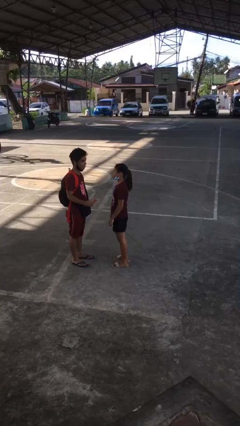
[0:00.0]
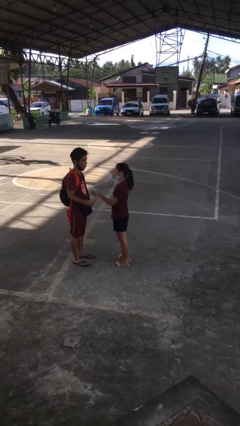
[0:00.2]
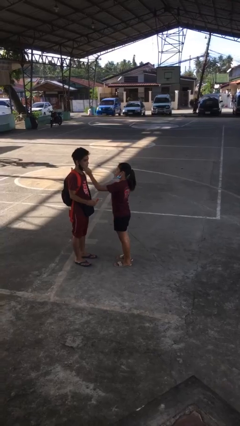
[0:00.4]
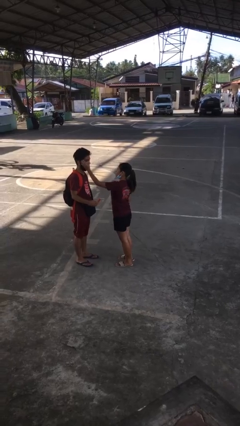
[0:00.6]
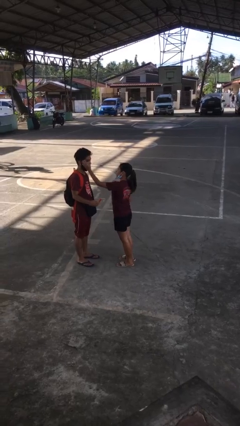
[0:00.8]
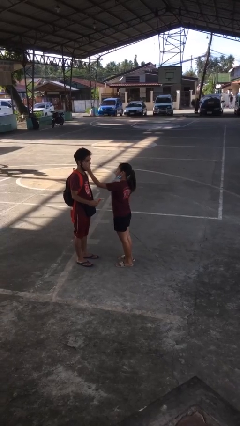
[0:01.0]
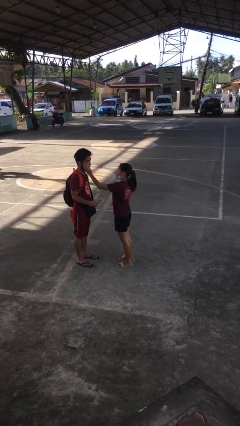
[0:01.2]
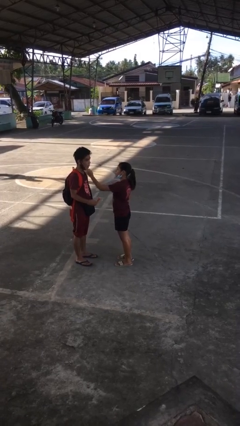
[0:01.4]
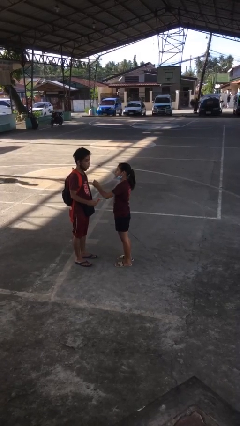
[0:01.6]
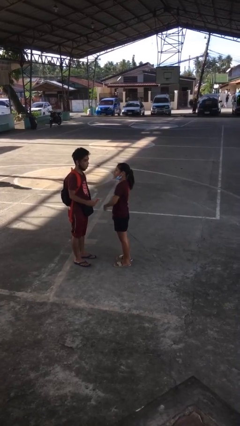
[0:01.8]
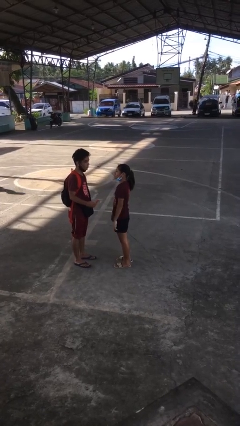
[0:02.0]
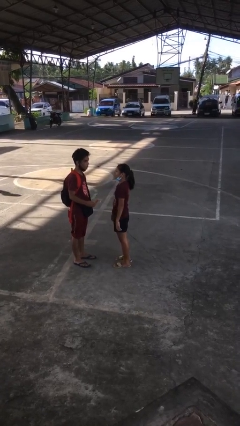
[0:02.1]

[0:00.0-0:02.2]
person touches face of person

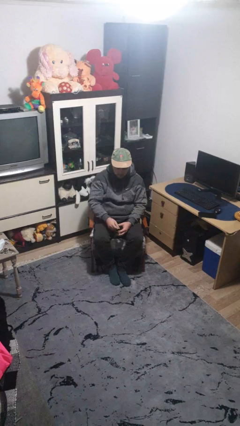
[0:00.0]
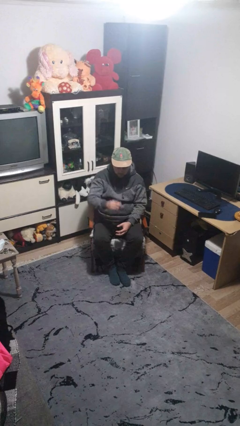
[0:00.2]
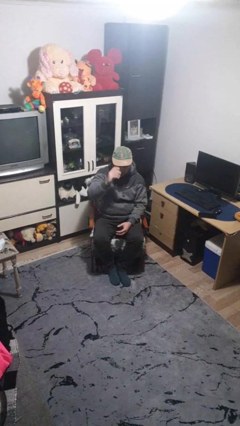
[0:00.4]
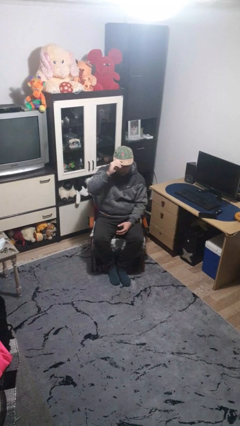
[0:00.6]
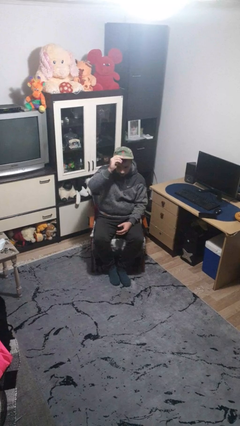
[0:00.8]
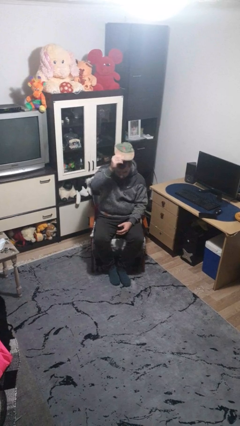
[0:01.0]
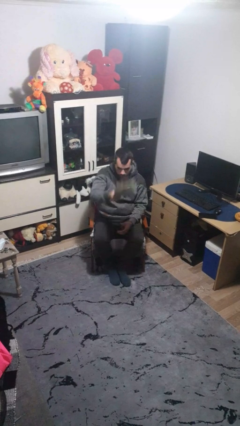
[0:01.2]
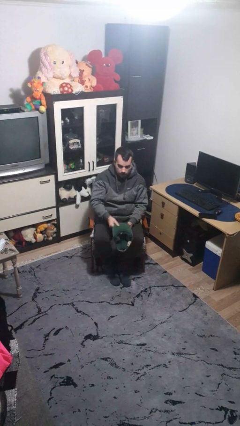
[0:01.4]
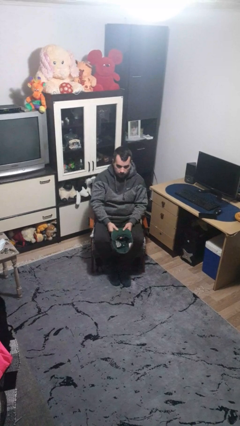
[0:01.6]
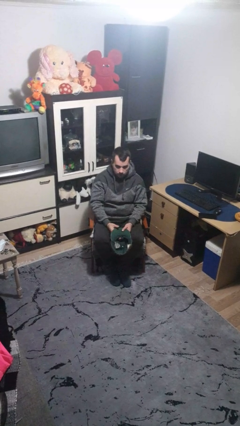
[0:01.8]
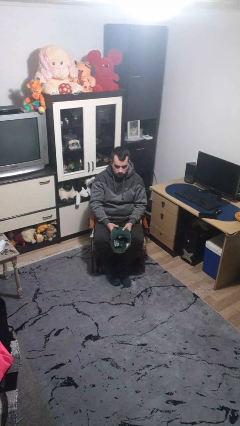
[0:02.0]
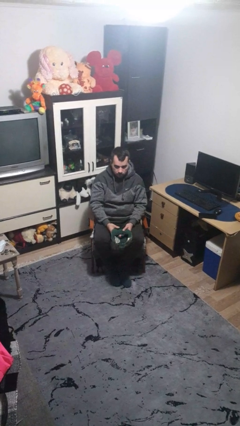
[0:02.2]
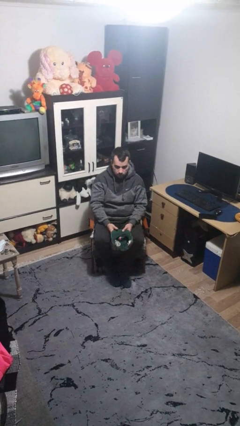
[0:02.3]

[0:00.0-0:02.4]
person takes off hat

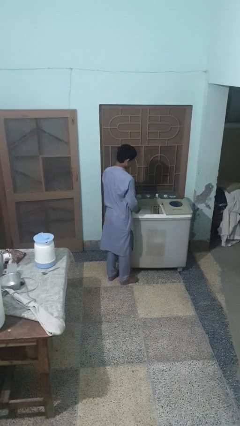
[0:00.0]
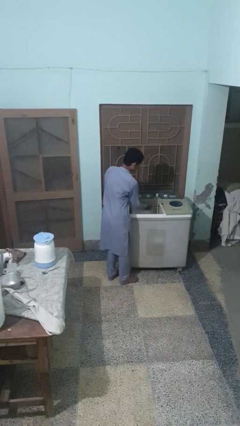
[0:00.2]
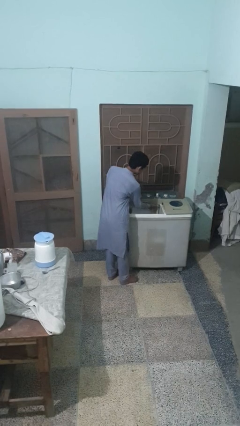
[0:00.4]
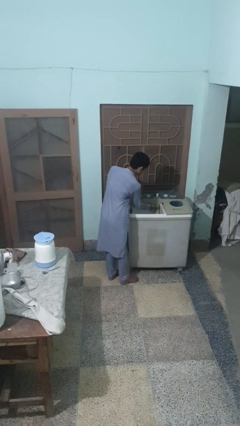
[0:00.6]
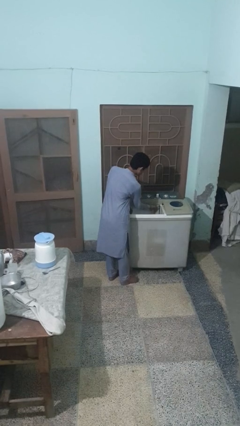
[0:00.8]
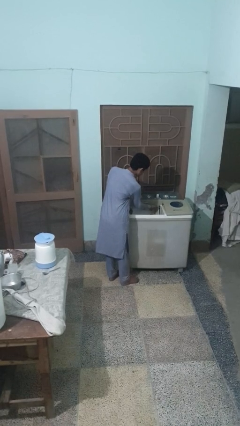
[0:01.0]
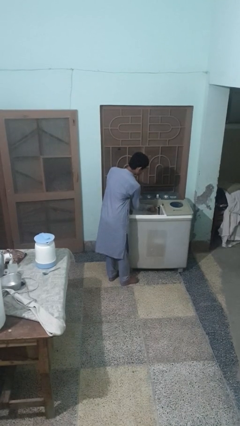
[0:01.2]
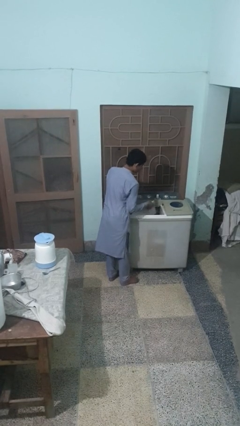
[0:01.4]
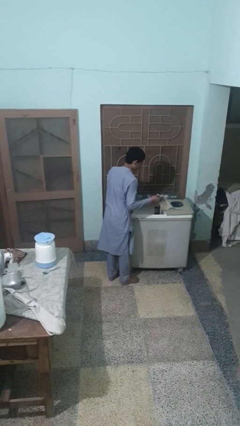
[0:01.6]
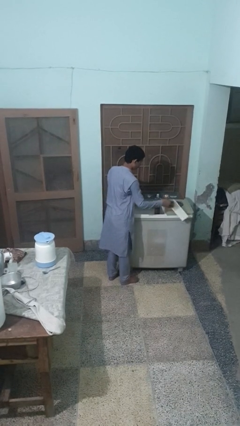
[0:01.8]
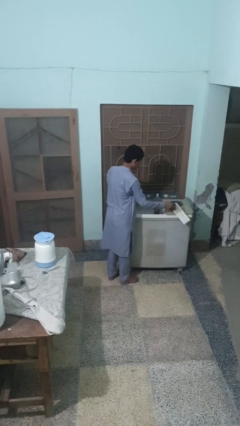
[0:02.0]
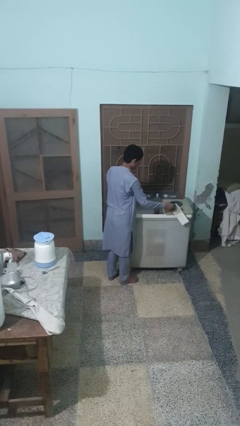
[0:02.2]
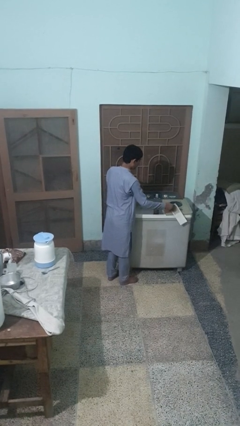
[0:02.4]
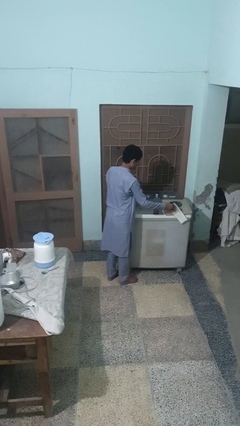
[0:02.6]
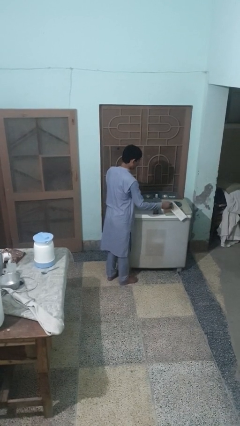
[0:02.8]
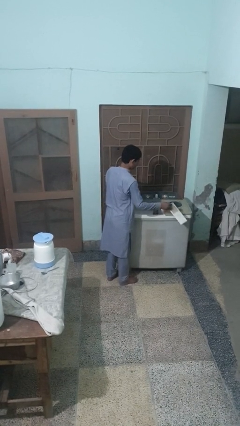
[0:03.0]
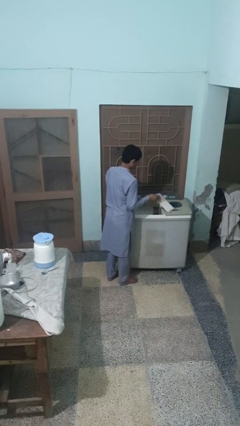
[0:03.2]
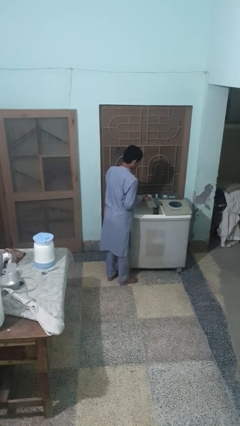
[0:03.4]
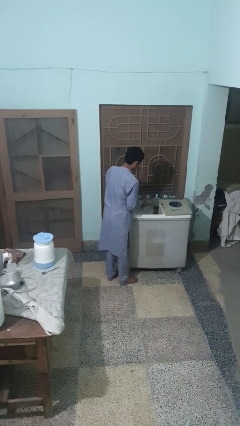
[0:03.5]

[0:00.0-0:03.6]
person cleans dryer lint trap

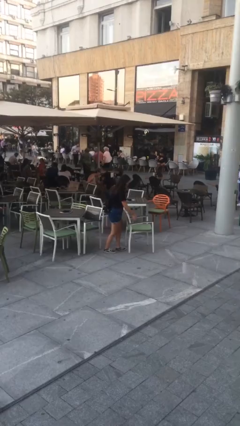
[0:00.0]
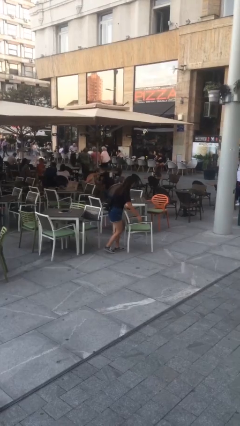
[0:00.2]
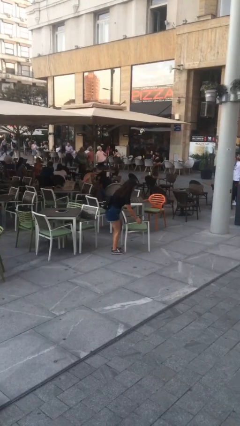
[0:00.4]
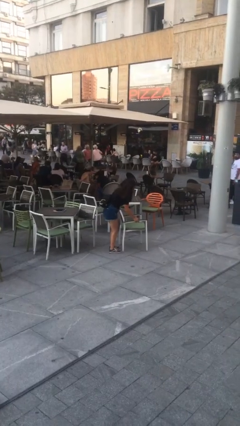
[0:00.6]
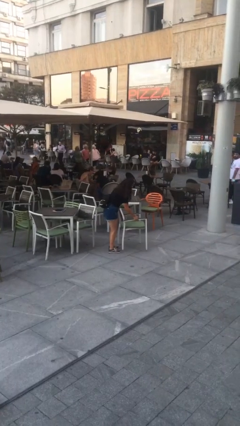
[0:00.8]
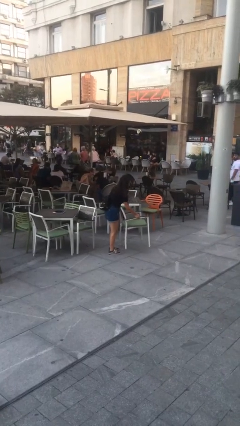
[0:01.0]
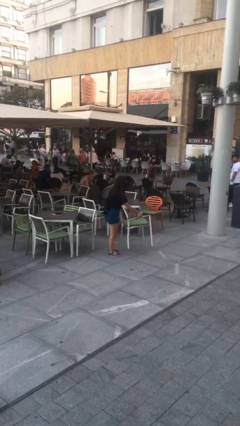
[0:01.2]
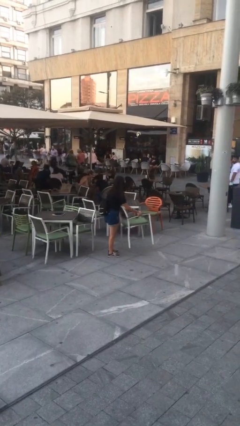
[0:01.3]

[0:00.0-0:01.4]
person picks up object from floor

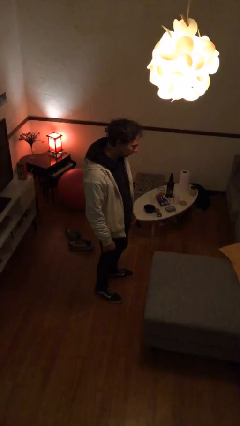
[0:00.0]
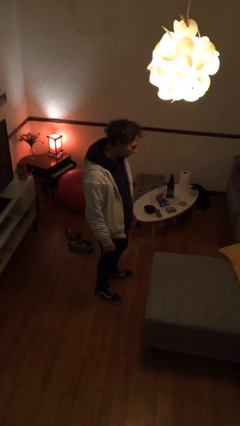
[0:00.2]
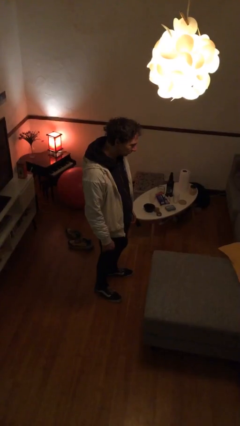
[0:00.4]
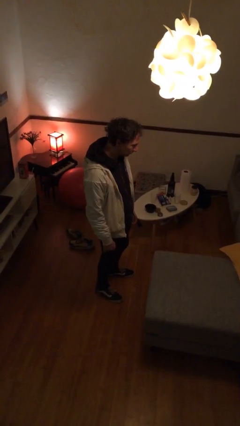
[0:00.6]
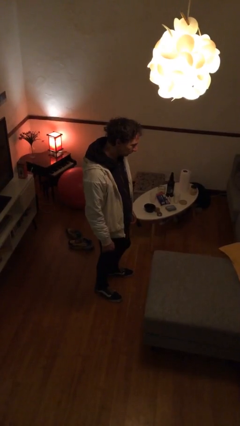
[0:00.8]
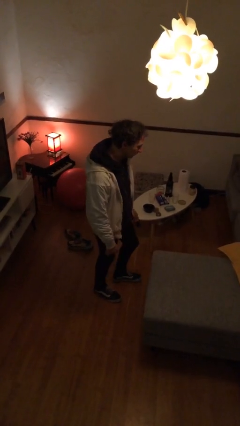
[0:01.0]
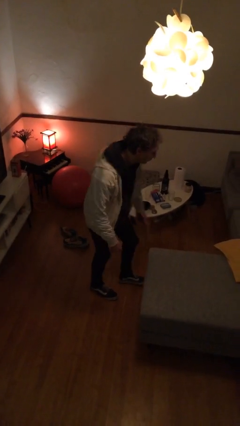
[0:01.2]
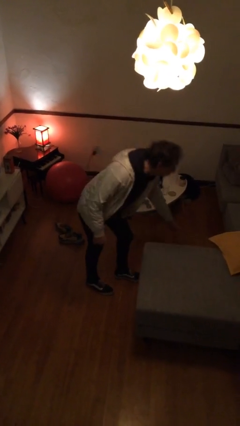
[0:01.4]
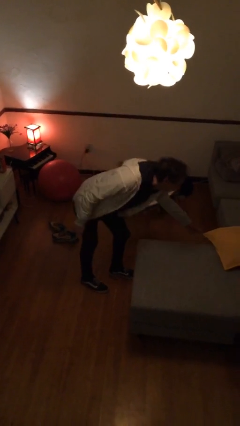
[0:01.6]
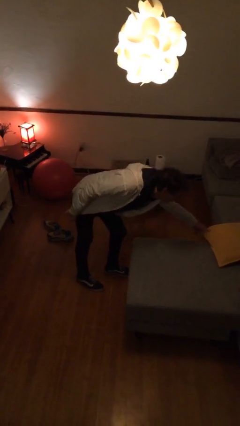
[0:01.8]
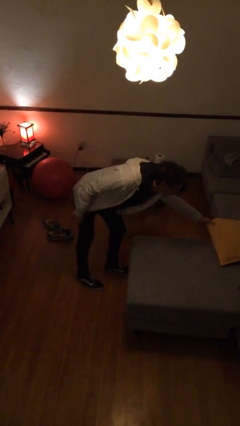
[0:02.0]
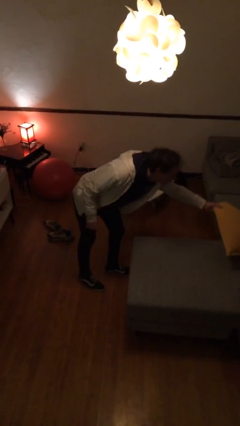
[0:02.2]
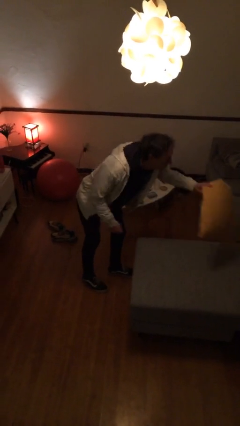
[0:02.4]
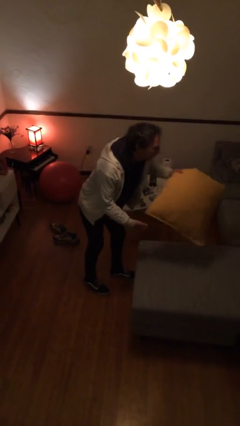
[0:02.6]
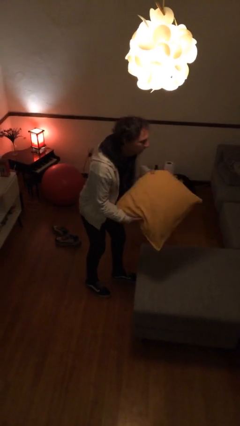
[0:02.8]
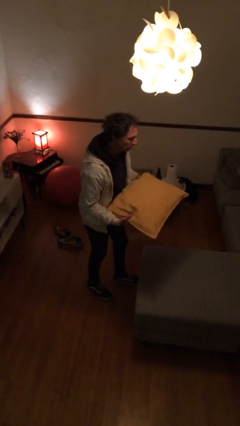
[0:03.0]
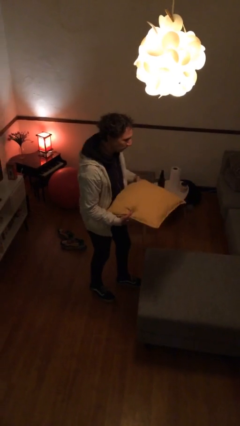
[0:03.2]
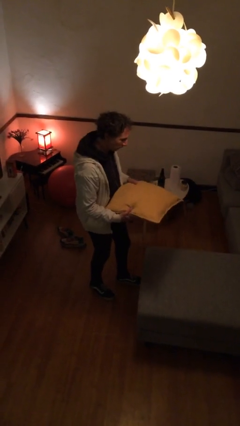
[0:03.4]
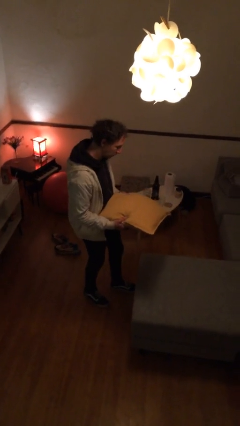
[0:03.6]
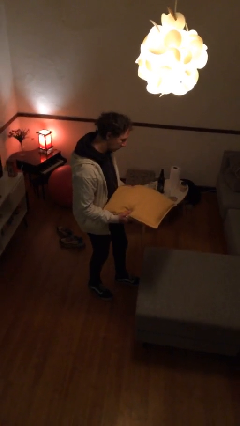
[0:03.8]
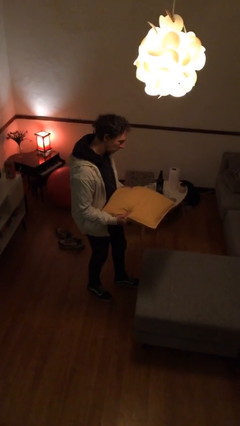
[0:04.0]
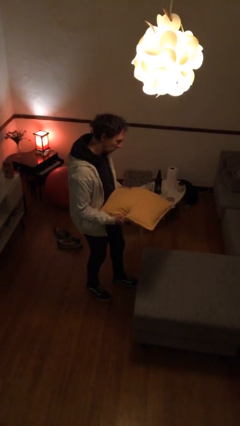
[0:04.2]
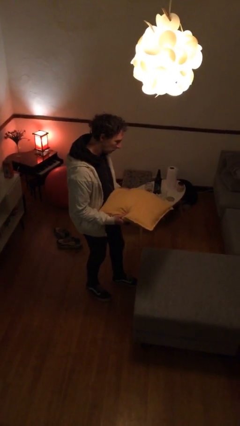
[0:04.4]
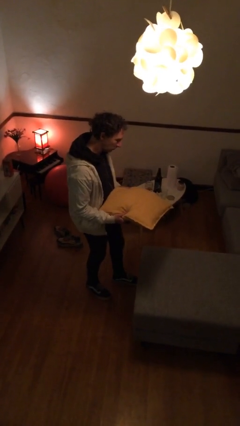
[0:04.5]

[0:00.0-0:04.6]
person picks up object from couch

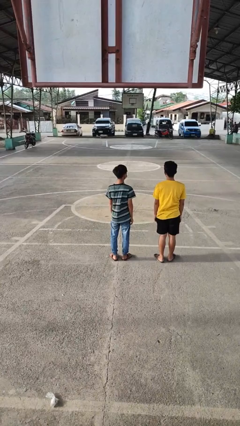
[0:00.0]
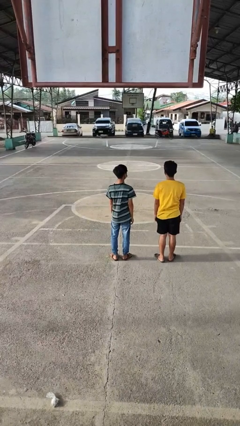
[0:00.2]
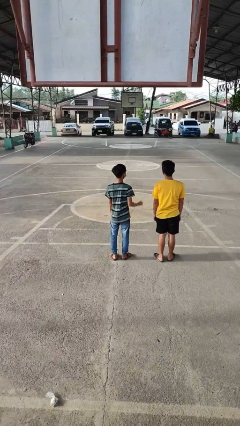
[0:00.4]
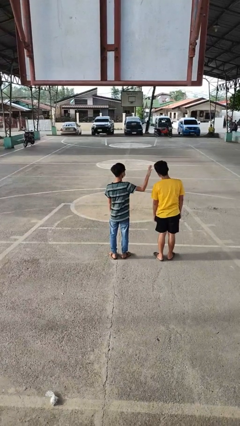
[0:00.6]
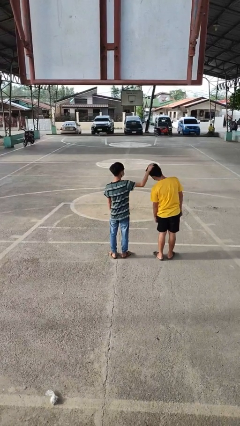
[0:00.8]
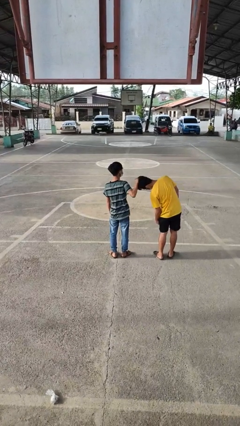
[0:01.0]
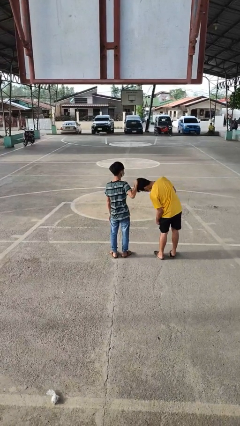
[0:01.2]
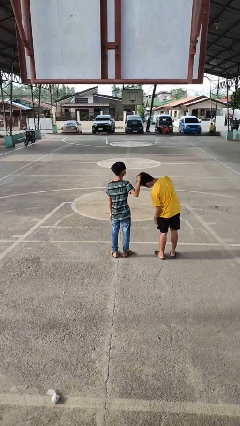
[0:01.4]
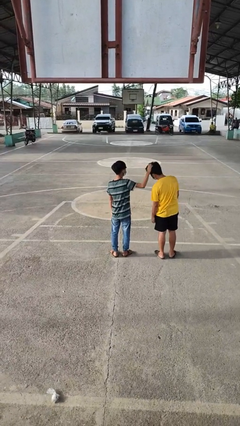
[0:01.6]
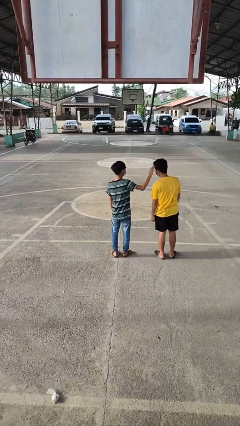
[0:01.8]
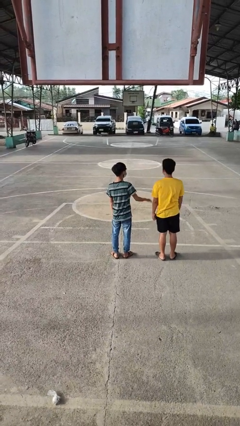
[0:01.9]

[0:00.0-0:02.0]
person grabs person by hair

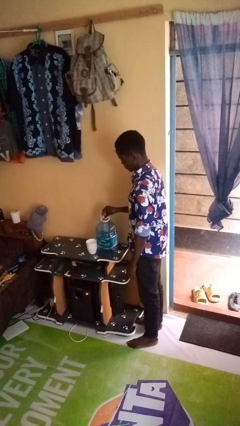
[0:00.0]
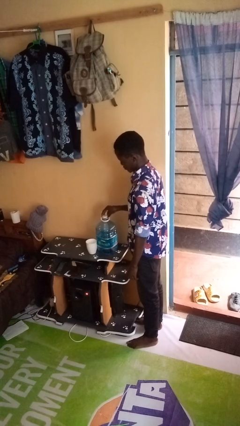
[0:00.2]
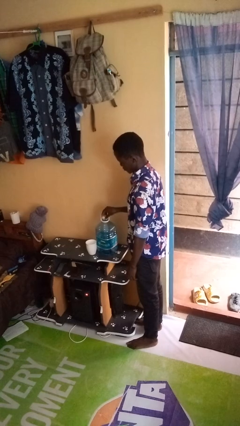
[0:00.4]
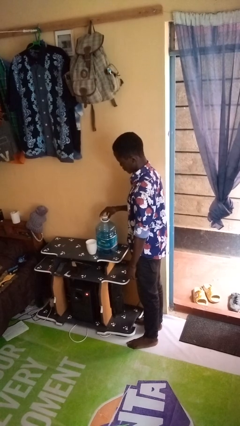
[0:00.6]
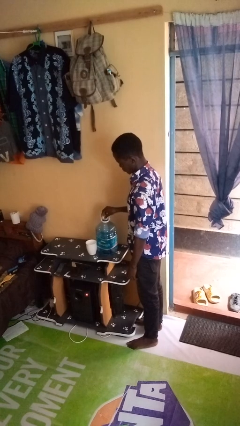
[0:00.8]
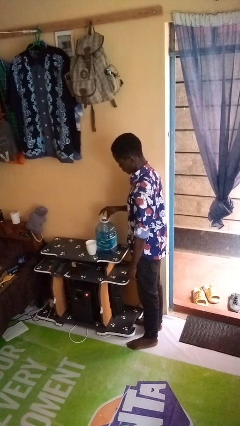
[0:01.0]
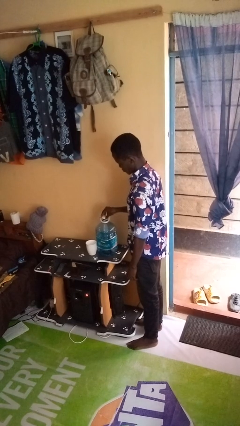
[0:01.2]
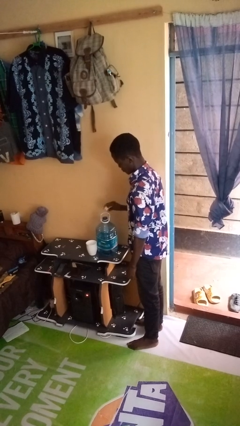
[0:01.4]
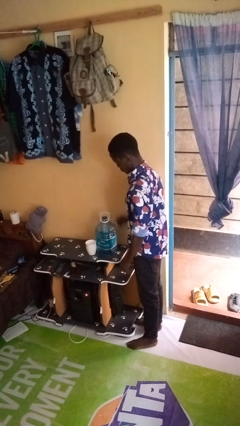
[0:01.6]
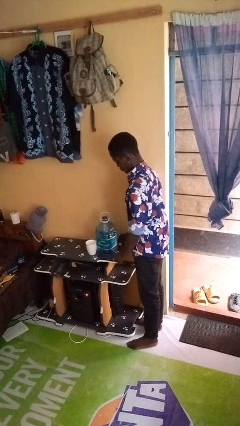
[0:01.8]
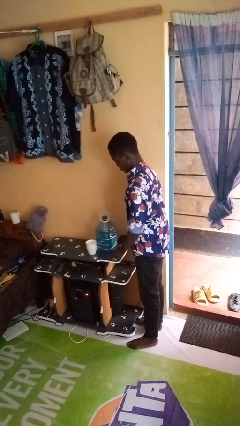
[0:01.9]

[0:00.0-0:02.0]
person unscrews lid from bottle
